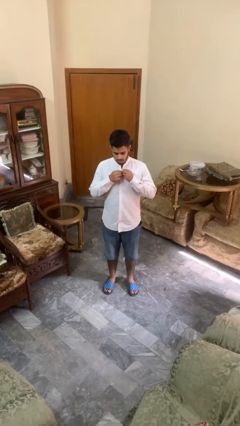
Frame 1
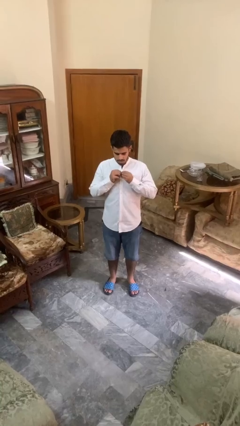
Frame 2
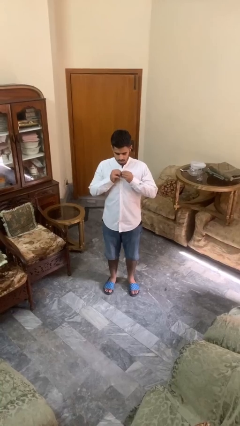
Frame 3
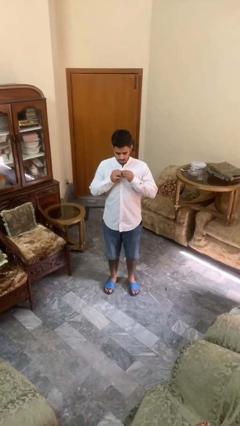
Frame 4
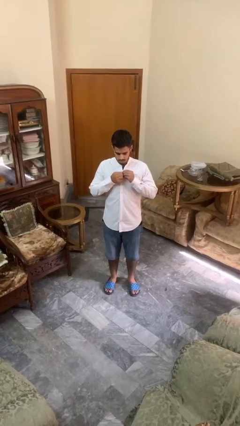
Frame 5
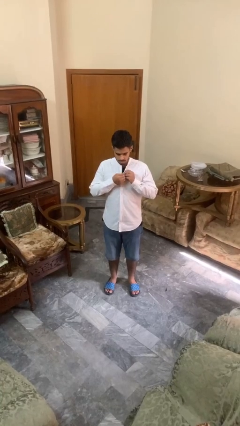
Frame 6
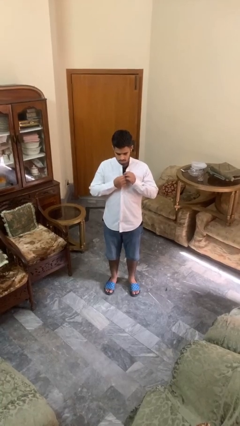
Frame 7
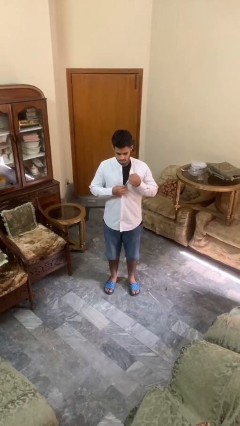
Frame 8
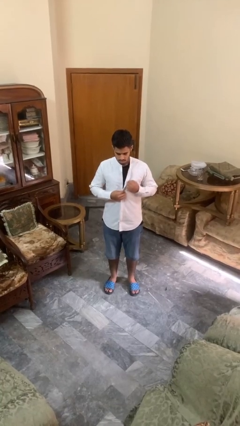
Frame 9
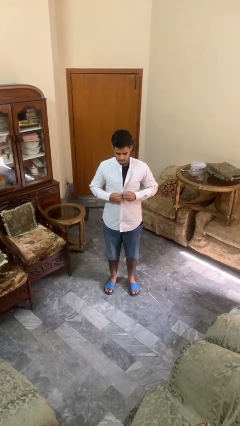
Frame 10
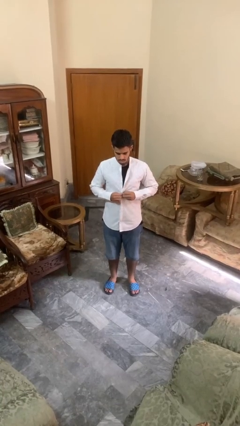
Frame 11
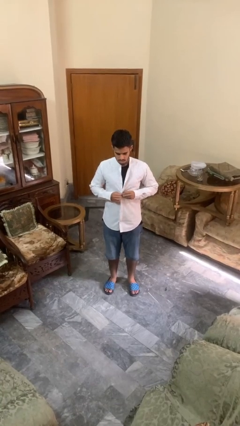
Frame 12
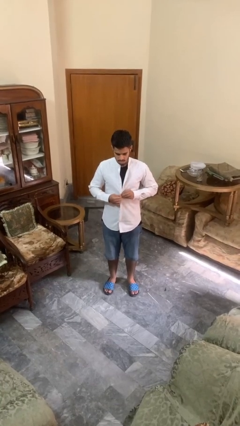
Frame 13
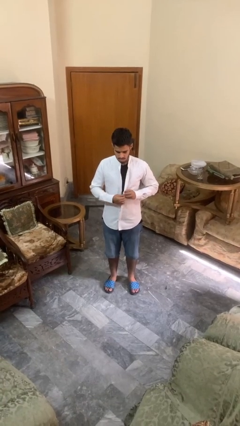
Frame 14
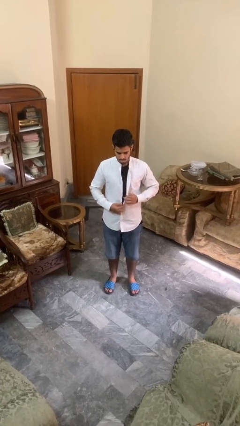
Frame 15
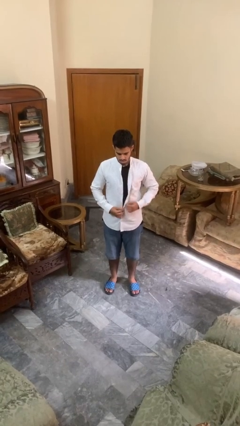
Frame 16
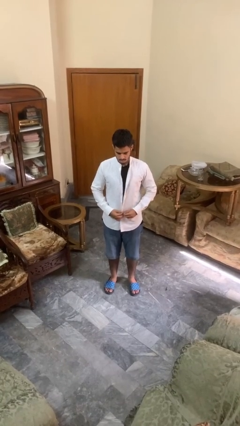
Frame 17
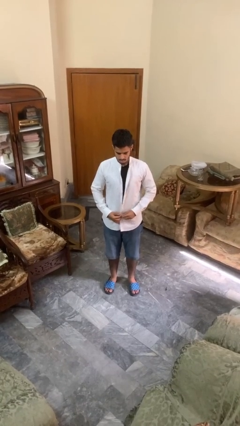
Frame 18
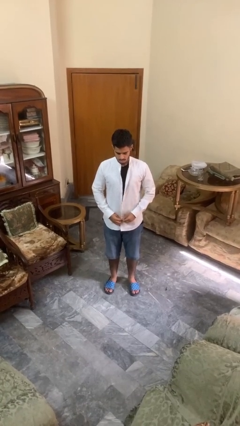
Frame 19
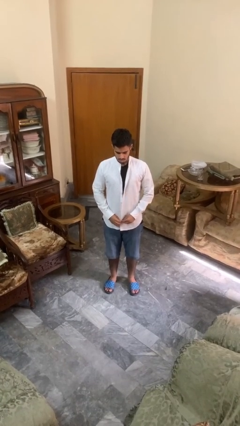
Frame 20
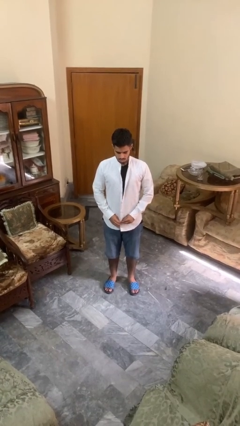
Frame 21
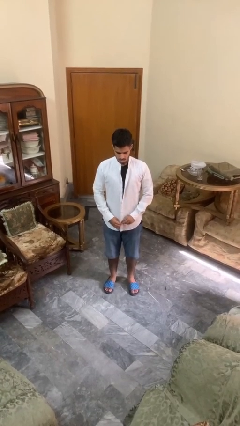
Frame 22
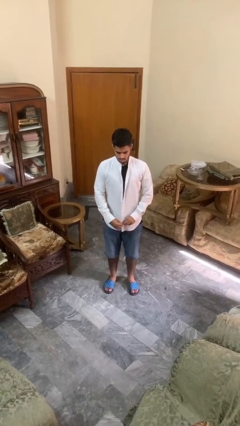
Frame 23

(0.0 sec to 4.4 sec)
person unbuttons shirt

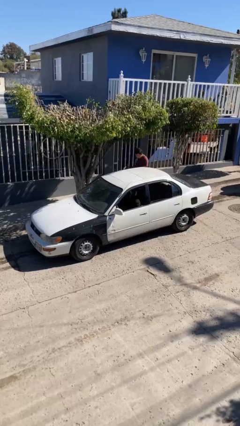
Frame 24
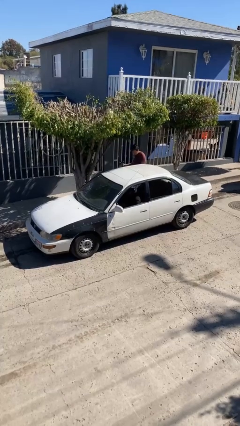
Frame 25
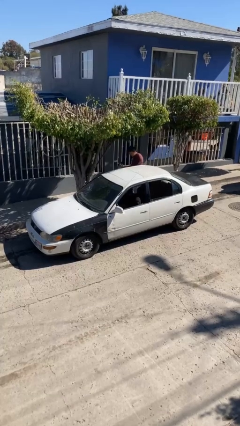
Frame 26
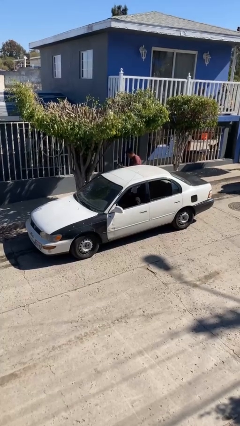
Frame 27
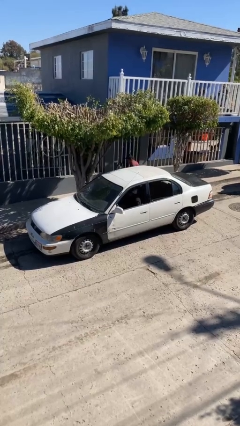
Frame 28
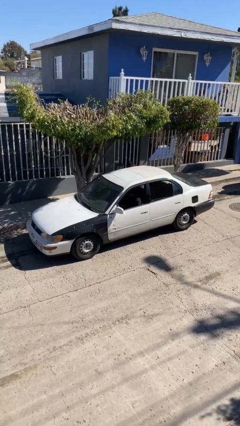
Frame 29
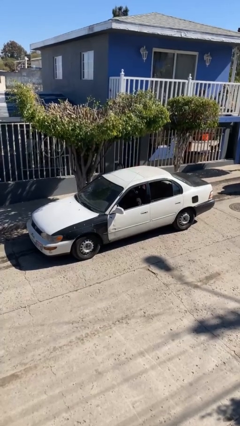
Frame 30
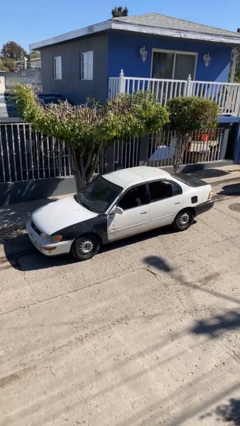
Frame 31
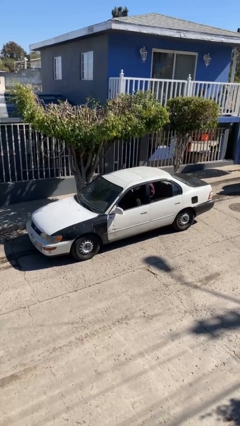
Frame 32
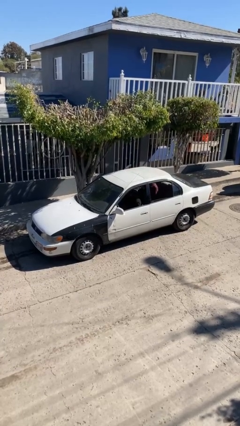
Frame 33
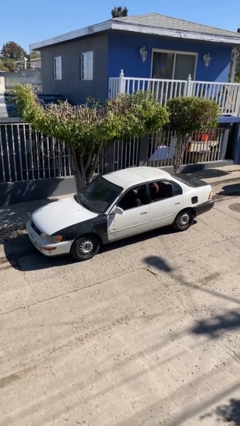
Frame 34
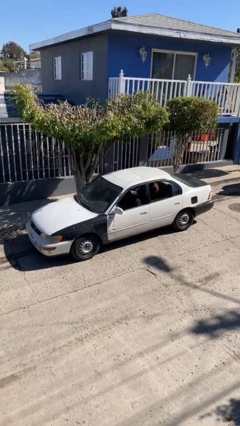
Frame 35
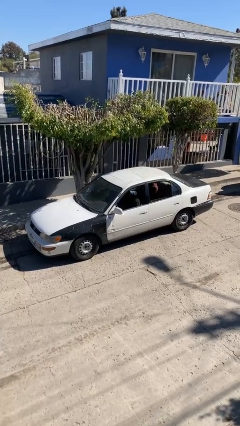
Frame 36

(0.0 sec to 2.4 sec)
car picks up person

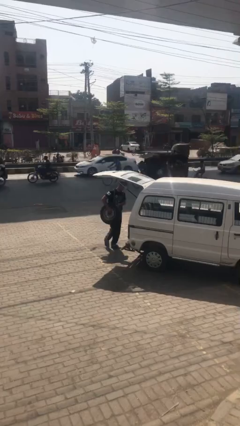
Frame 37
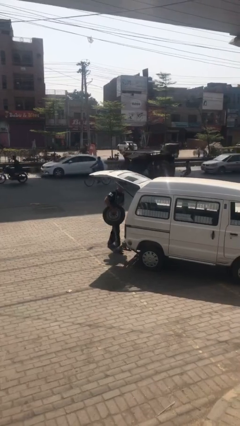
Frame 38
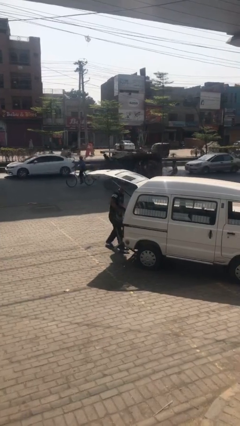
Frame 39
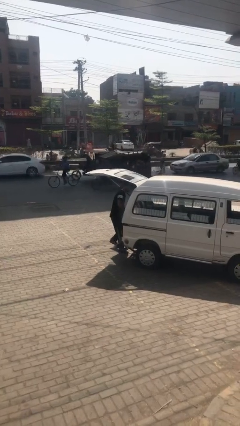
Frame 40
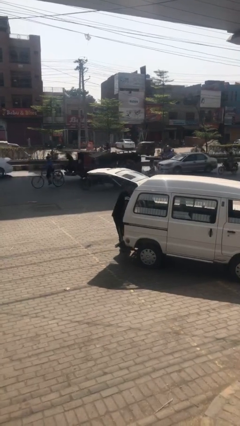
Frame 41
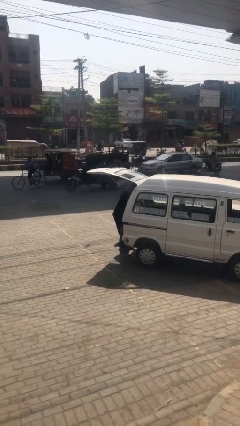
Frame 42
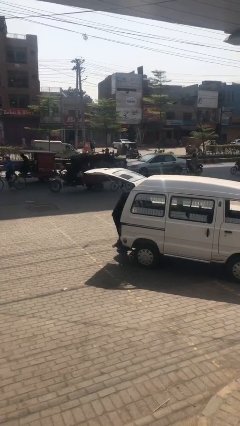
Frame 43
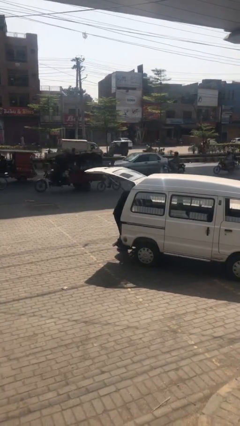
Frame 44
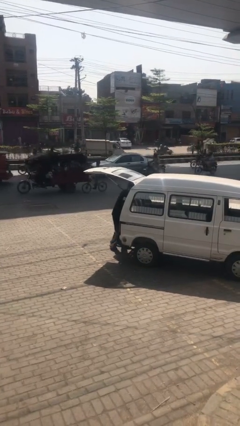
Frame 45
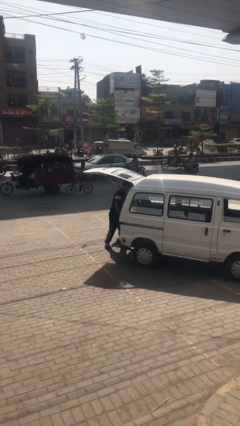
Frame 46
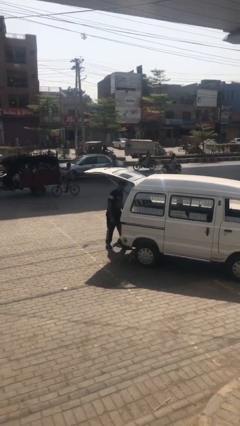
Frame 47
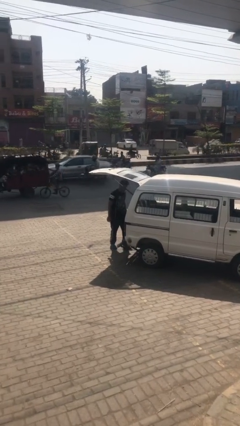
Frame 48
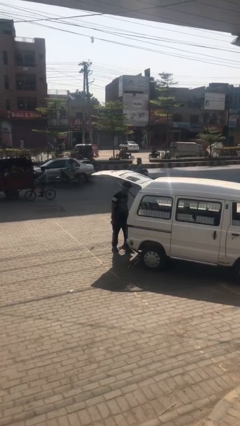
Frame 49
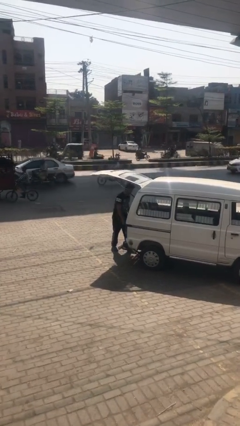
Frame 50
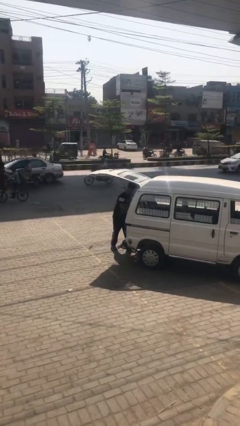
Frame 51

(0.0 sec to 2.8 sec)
person loads car

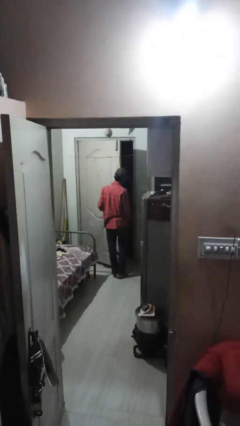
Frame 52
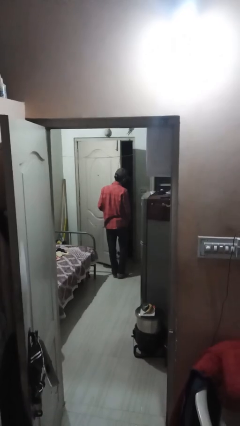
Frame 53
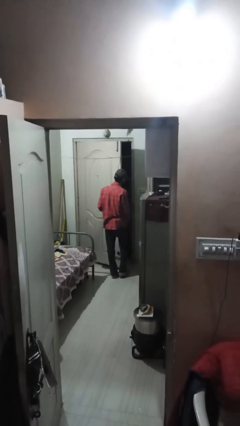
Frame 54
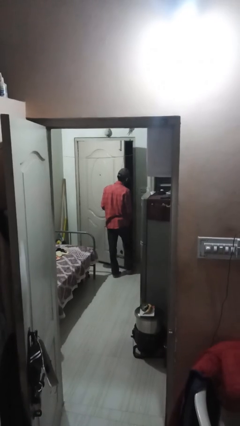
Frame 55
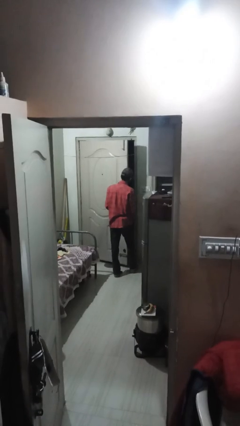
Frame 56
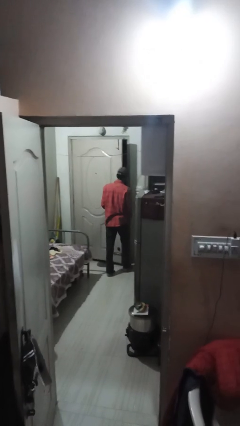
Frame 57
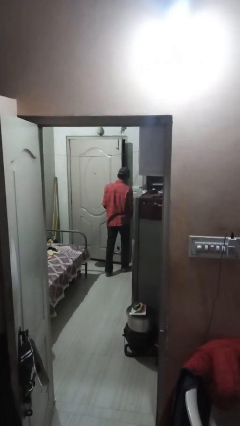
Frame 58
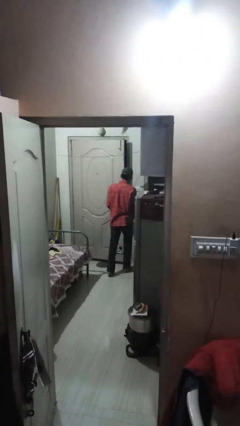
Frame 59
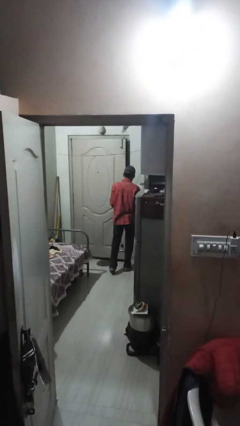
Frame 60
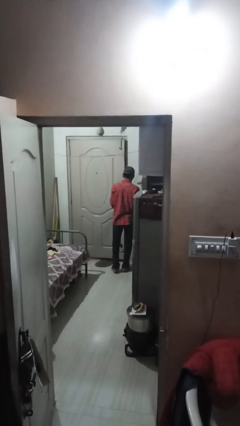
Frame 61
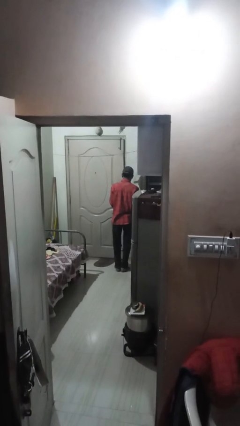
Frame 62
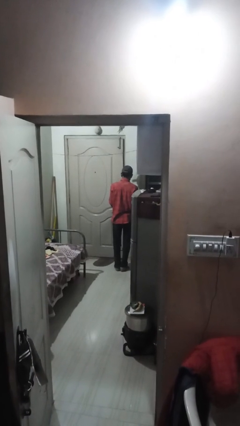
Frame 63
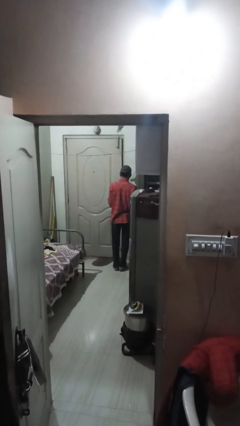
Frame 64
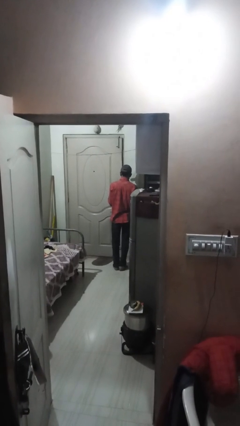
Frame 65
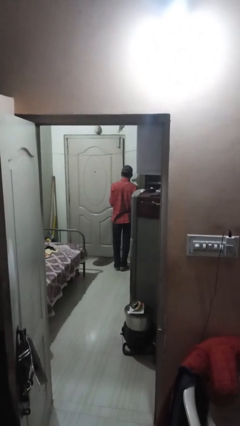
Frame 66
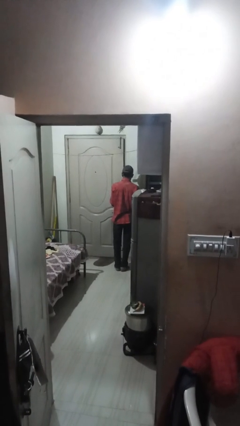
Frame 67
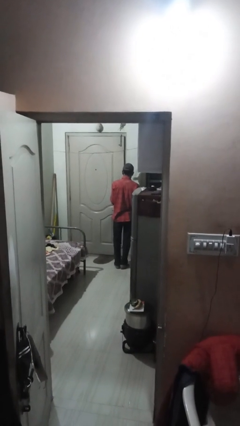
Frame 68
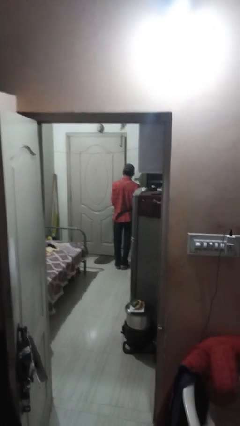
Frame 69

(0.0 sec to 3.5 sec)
person closes facility door

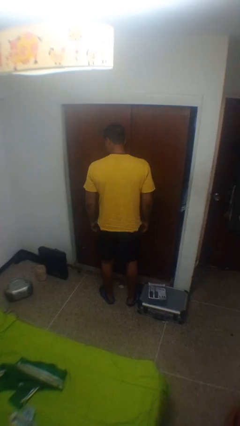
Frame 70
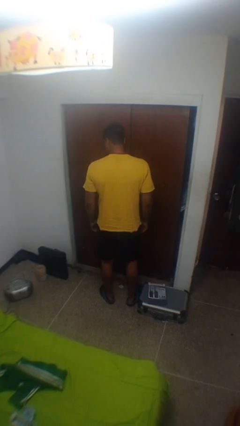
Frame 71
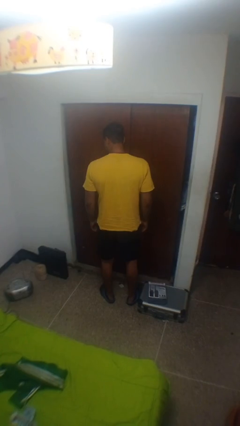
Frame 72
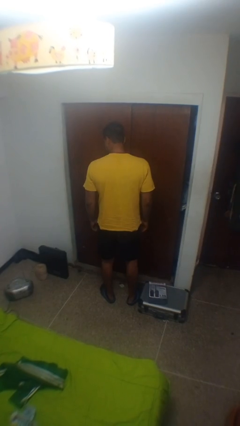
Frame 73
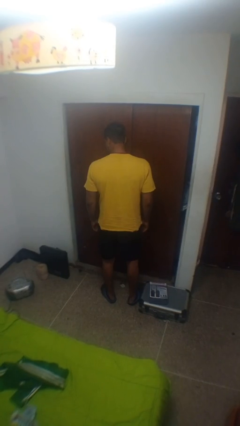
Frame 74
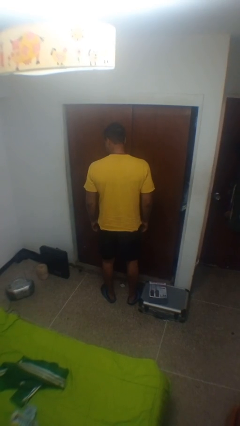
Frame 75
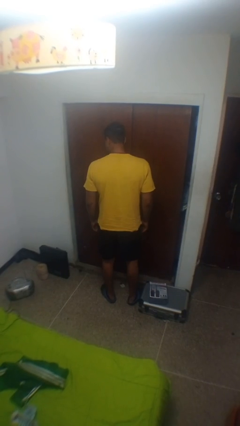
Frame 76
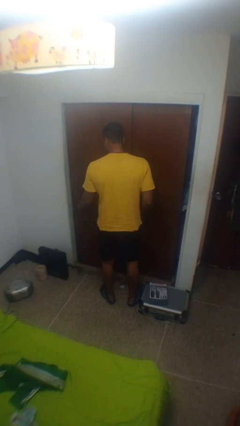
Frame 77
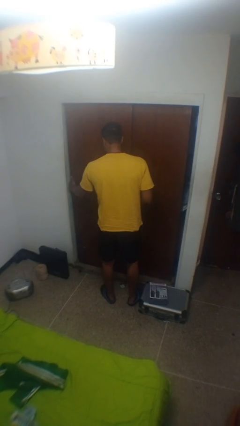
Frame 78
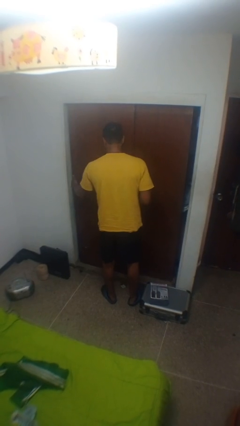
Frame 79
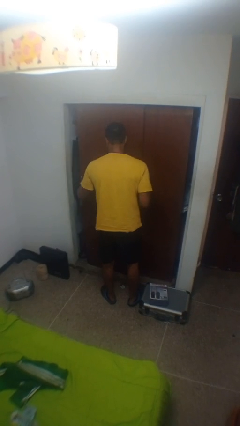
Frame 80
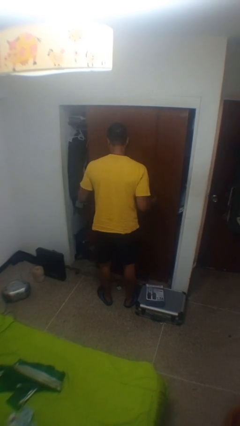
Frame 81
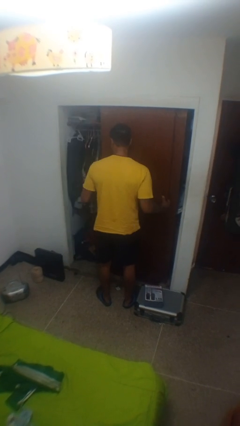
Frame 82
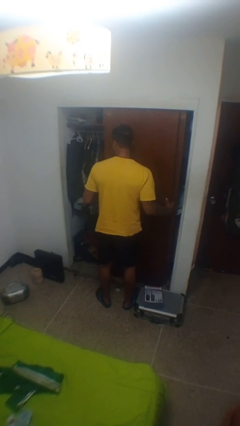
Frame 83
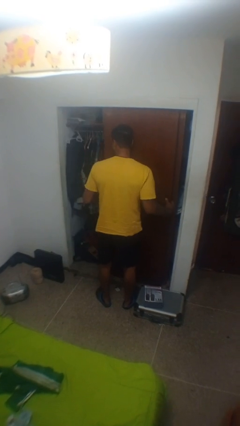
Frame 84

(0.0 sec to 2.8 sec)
person opens closet door

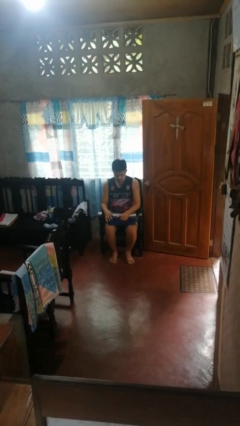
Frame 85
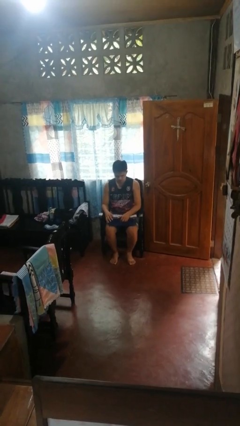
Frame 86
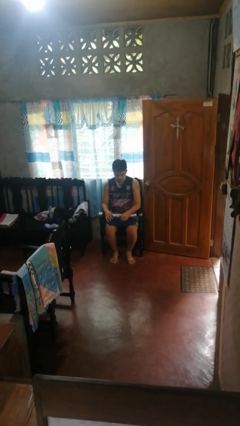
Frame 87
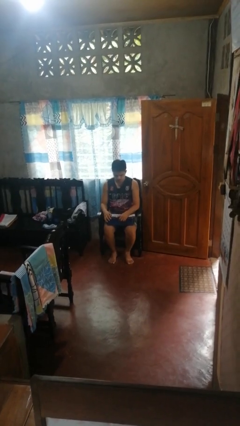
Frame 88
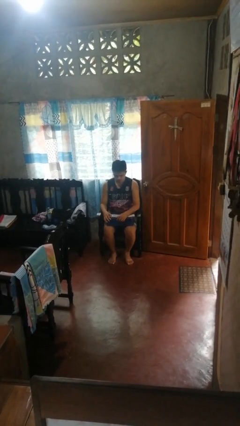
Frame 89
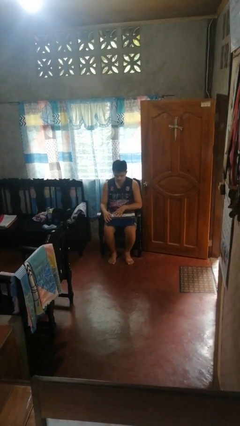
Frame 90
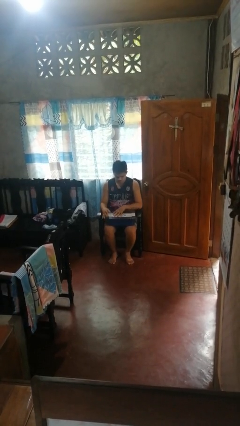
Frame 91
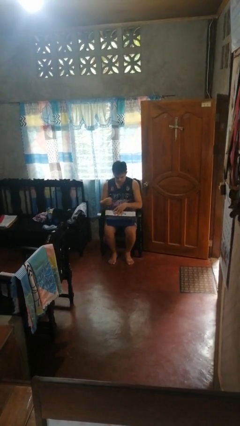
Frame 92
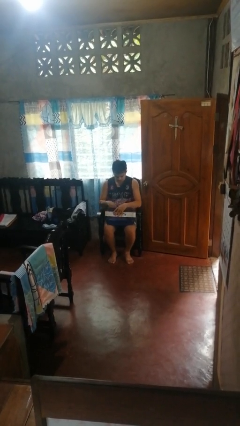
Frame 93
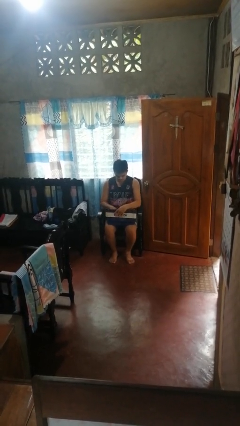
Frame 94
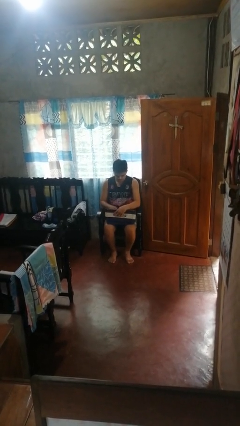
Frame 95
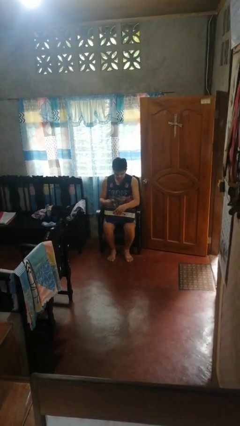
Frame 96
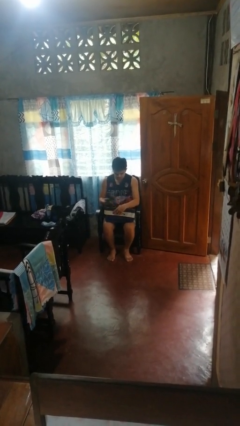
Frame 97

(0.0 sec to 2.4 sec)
person takes object from box
